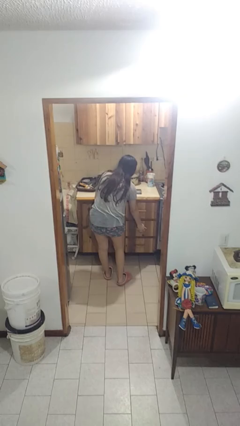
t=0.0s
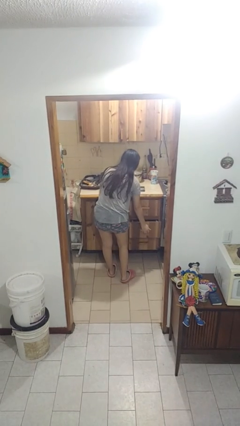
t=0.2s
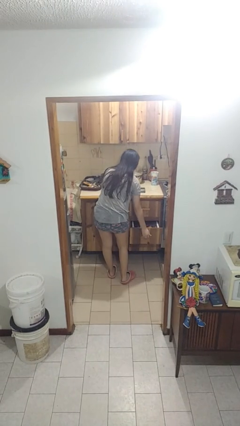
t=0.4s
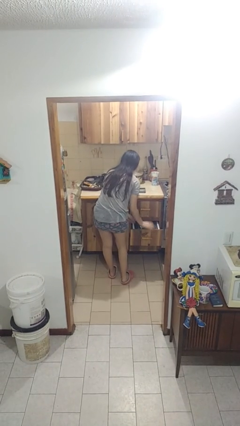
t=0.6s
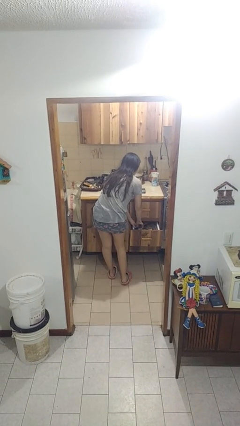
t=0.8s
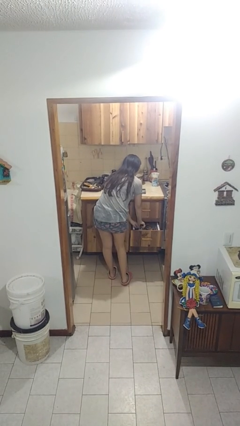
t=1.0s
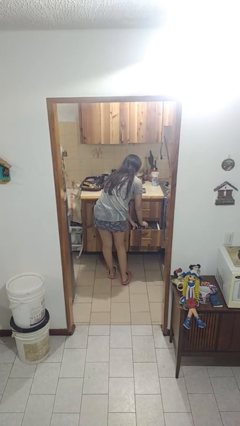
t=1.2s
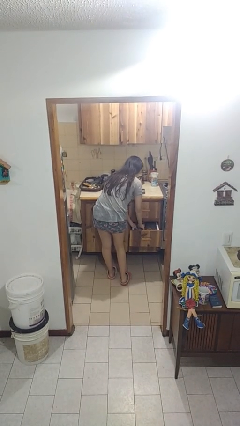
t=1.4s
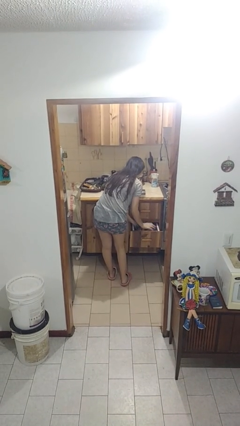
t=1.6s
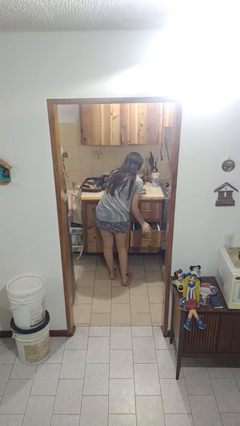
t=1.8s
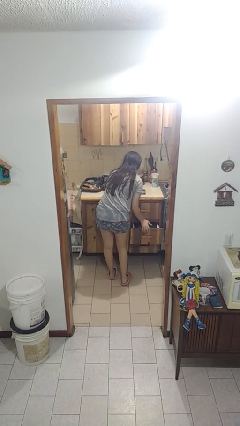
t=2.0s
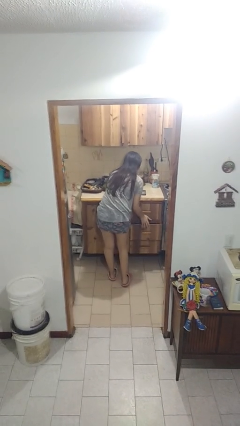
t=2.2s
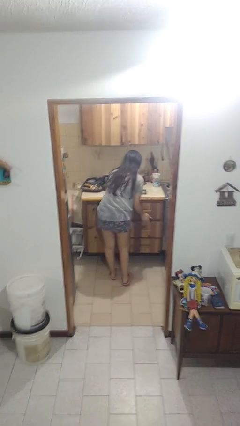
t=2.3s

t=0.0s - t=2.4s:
person searches in kitchen drawer

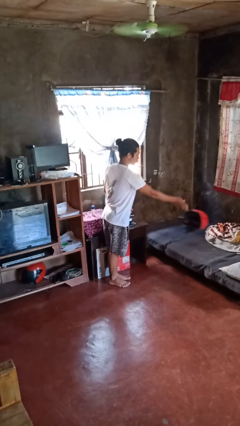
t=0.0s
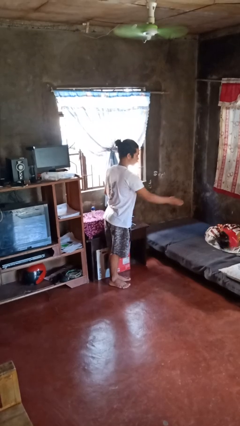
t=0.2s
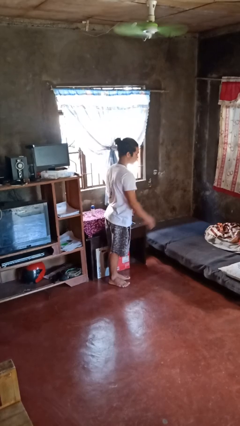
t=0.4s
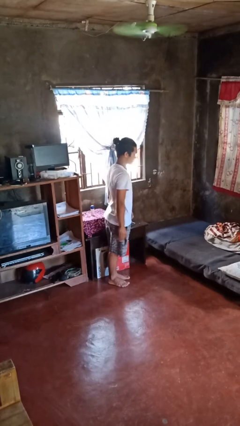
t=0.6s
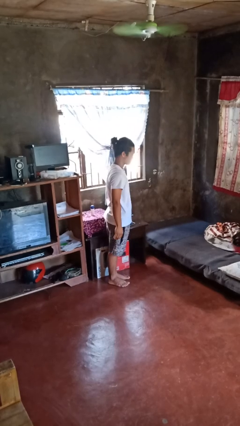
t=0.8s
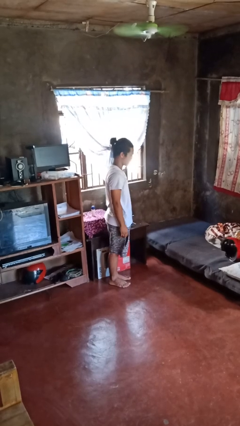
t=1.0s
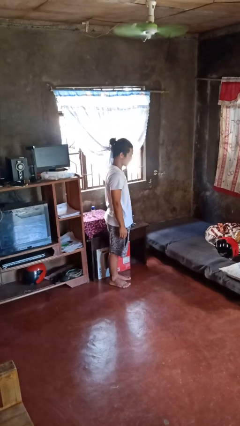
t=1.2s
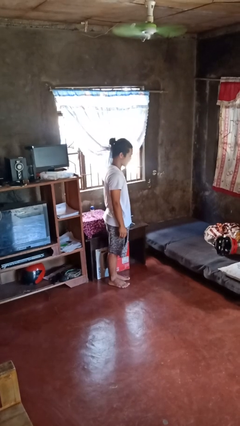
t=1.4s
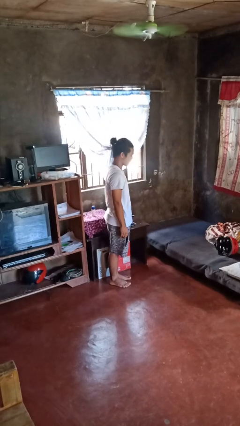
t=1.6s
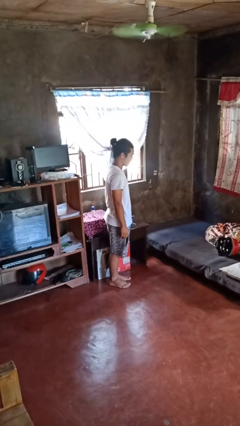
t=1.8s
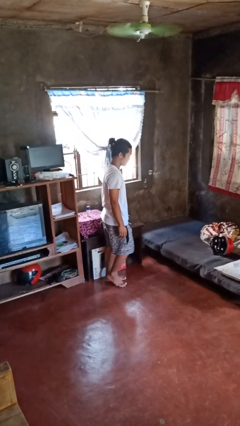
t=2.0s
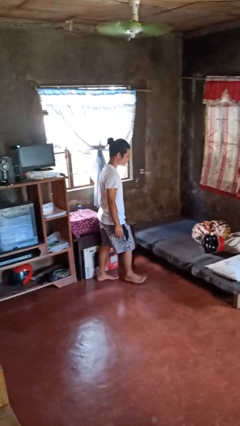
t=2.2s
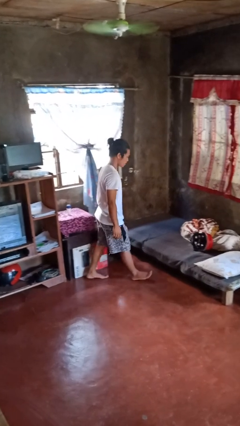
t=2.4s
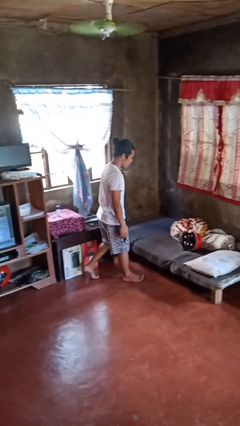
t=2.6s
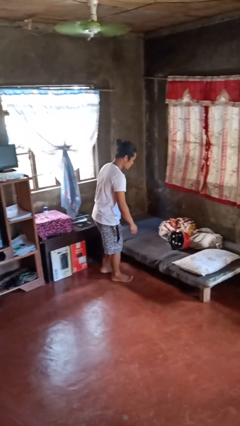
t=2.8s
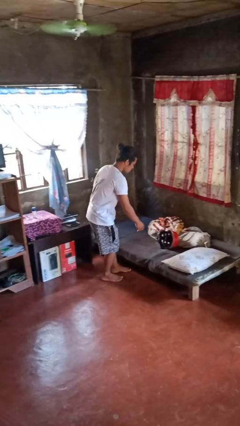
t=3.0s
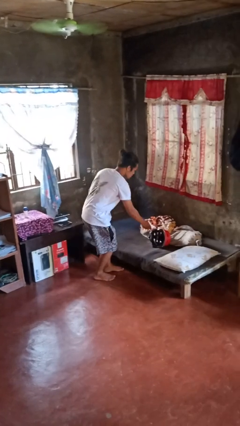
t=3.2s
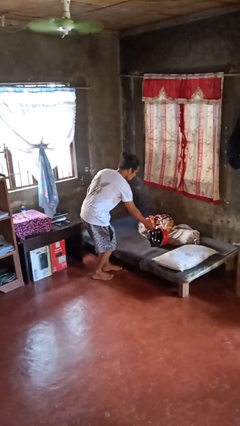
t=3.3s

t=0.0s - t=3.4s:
person throws object on bed

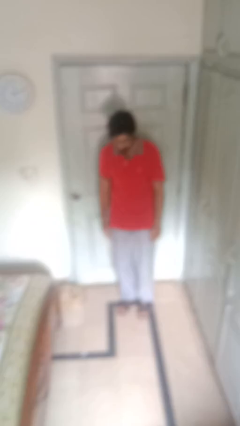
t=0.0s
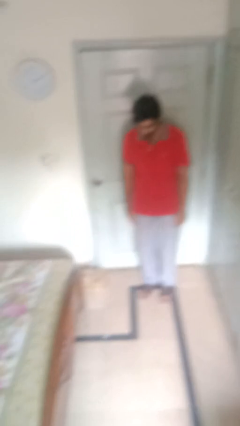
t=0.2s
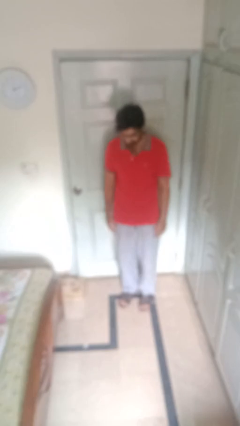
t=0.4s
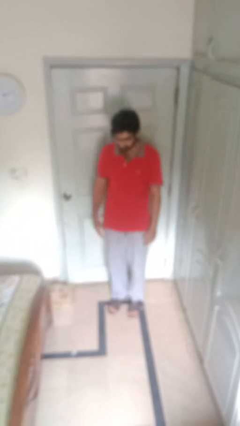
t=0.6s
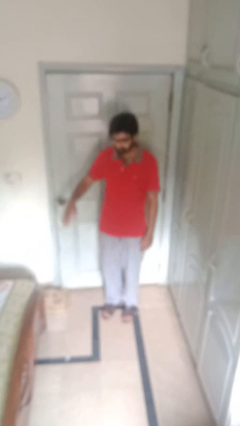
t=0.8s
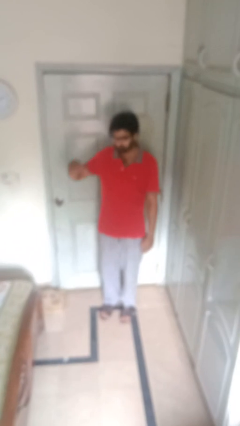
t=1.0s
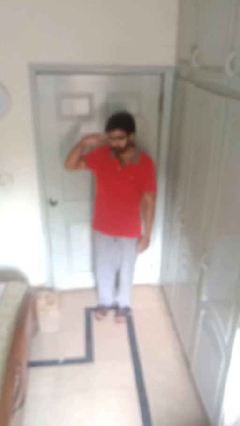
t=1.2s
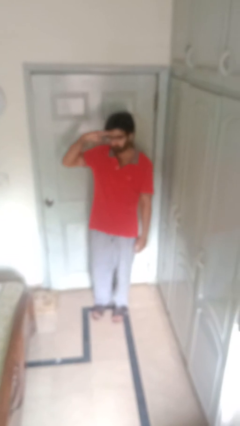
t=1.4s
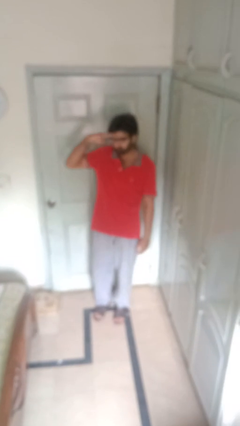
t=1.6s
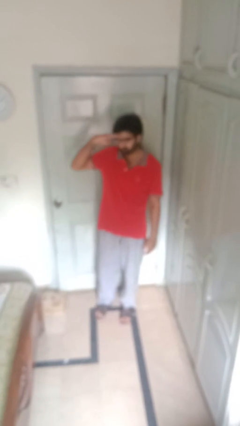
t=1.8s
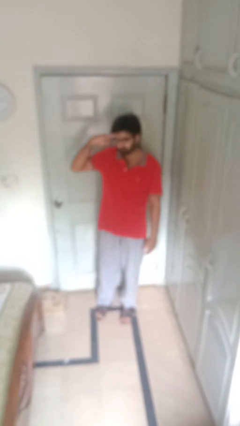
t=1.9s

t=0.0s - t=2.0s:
person salutes

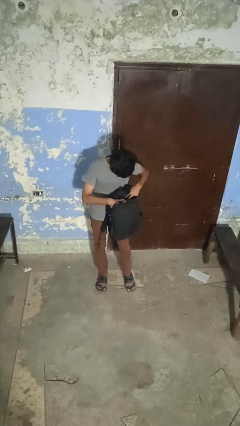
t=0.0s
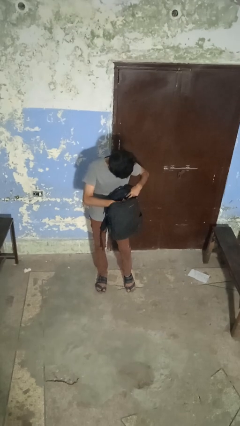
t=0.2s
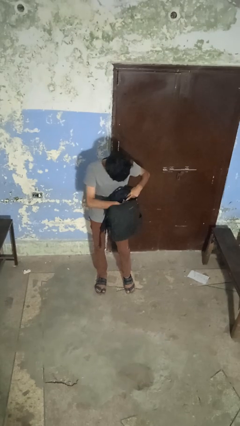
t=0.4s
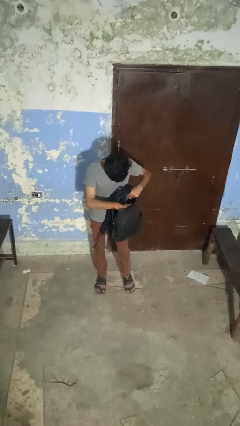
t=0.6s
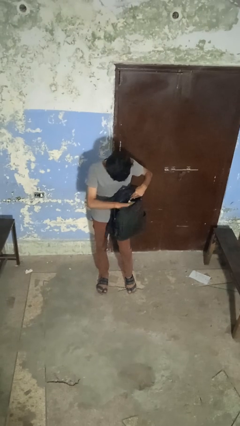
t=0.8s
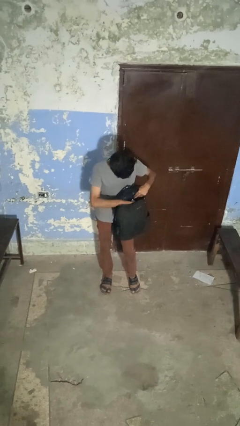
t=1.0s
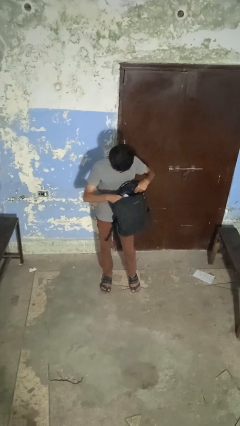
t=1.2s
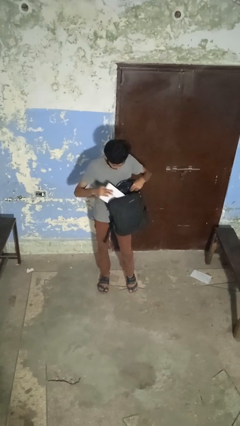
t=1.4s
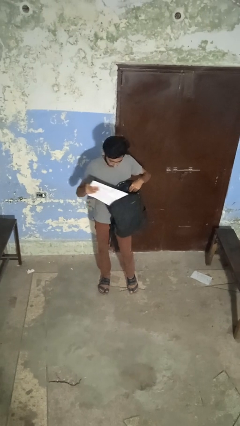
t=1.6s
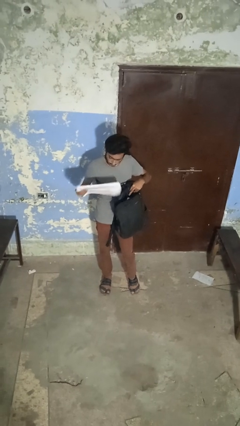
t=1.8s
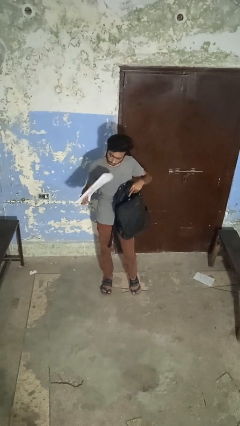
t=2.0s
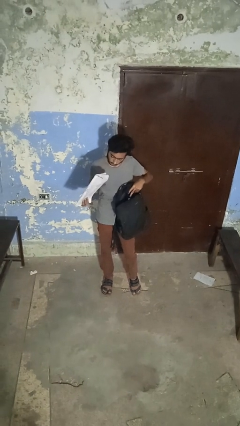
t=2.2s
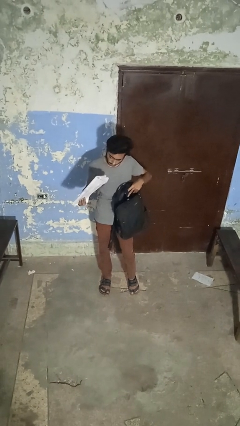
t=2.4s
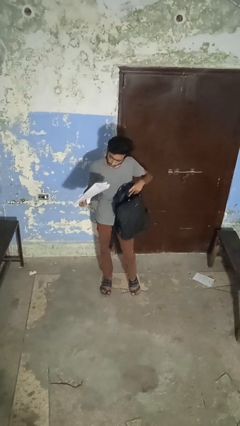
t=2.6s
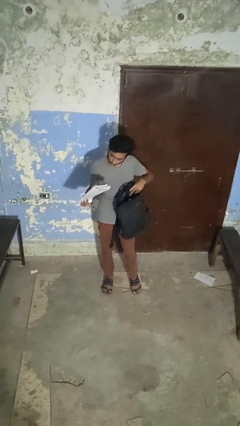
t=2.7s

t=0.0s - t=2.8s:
person takes object from backpack

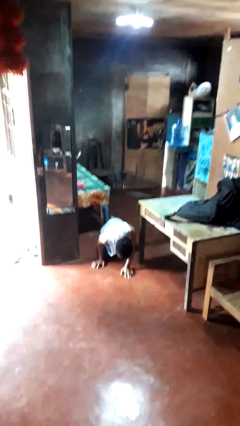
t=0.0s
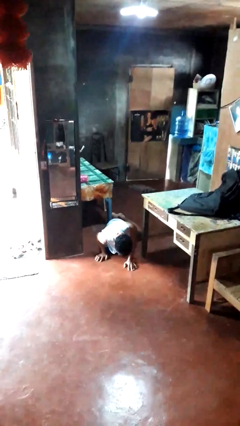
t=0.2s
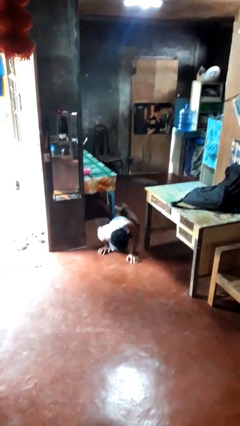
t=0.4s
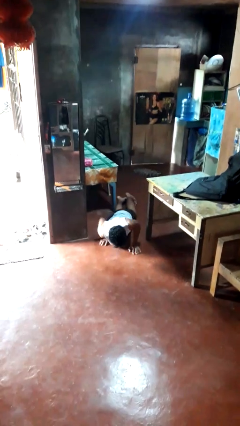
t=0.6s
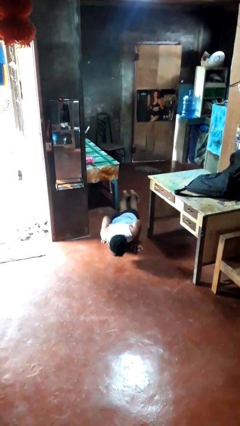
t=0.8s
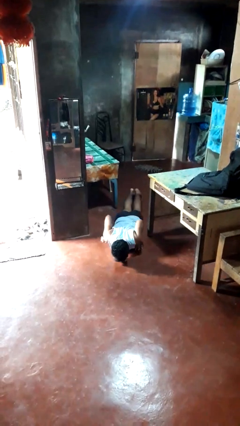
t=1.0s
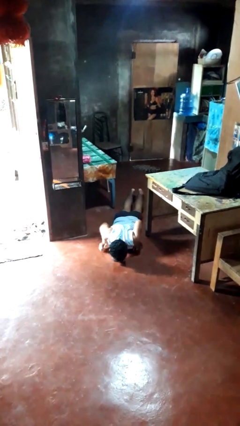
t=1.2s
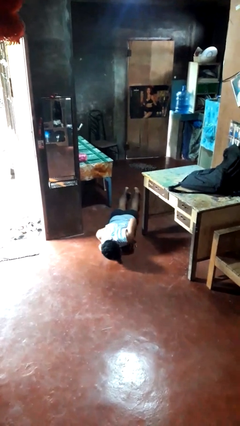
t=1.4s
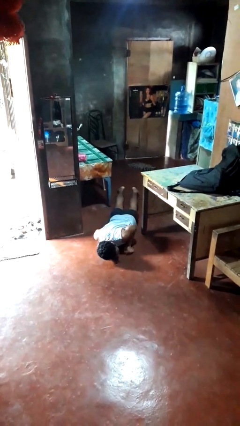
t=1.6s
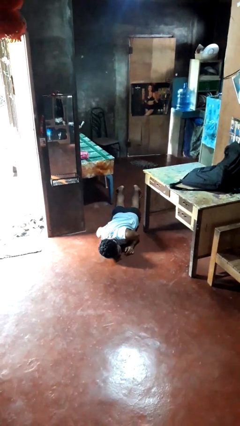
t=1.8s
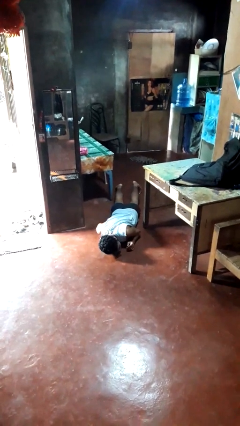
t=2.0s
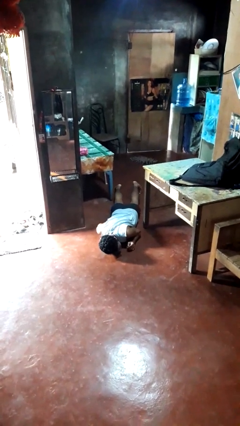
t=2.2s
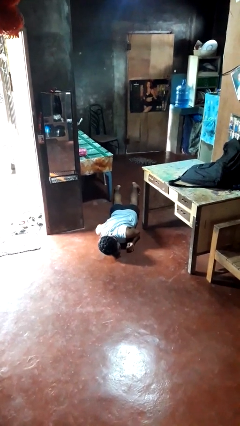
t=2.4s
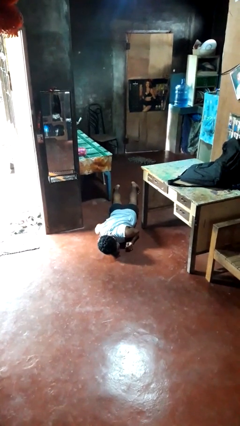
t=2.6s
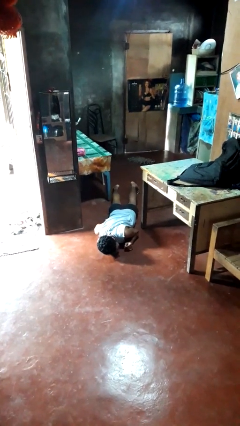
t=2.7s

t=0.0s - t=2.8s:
person lies down on floor

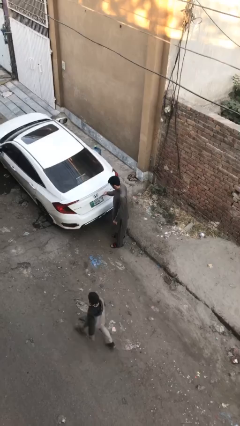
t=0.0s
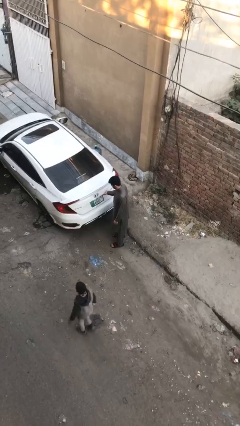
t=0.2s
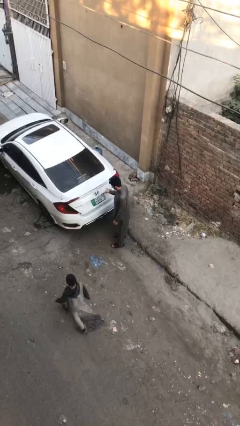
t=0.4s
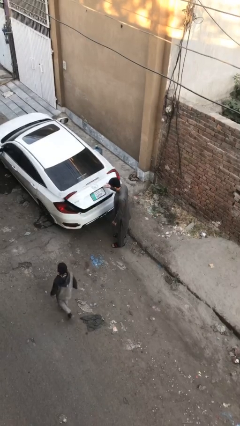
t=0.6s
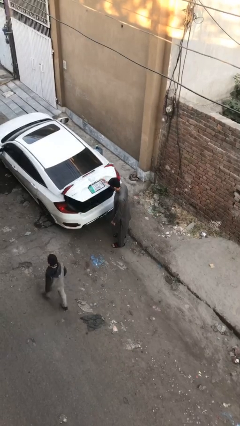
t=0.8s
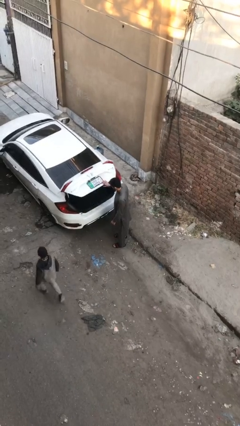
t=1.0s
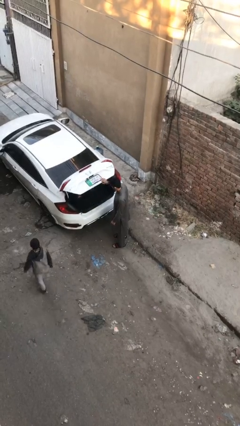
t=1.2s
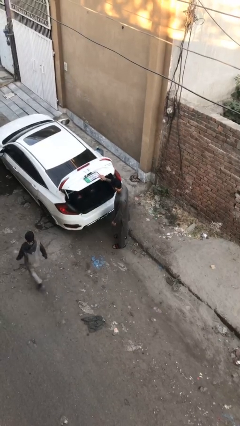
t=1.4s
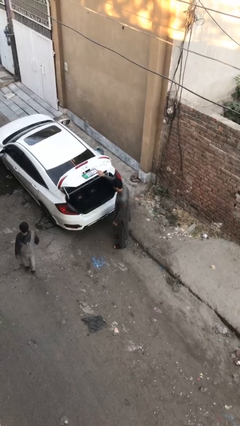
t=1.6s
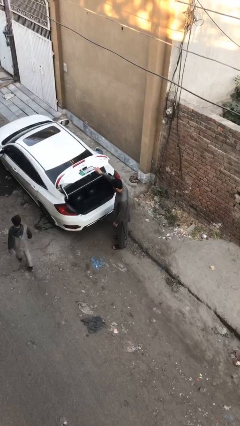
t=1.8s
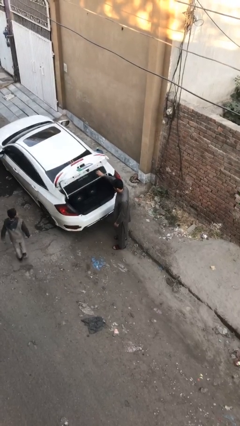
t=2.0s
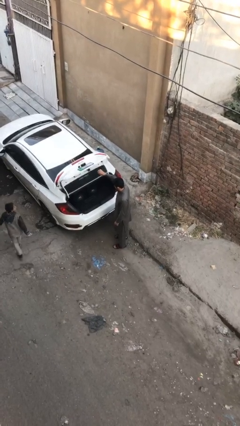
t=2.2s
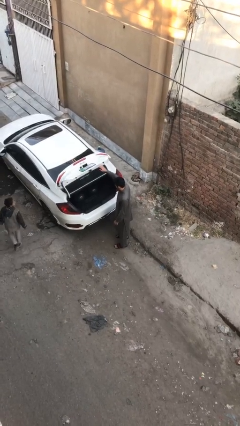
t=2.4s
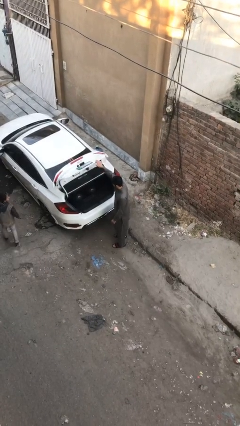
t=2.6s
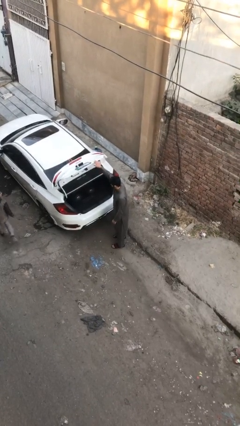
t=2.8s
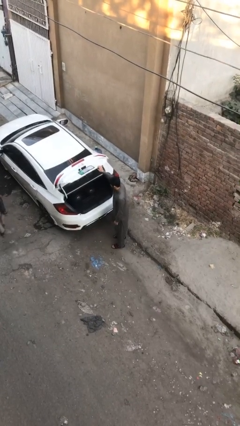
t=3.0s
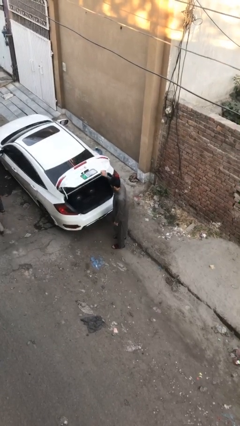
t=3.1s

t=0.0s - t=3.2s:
person opens car trunk

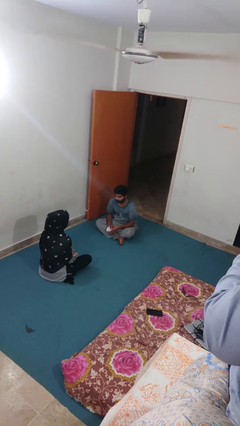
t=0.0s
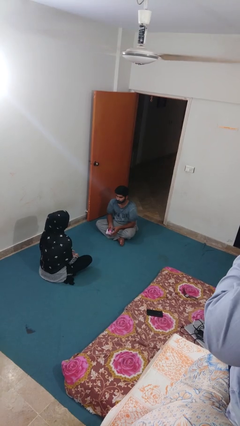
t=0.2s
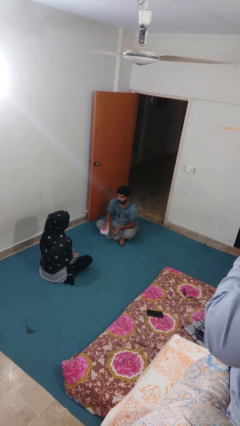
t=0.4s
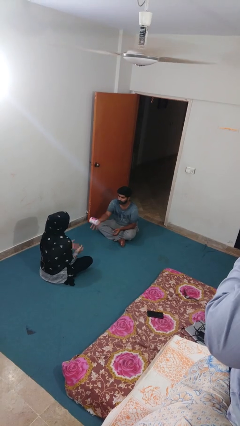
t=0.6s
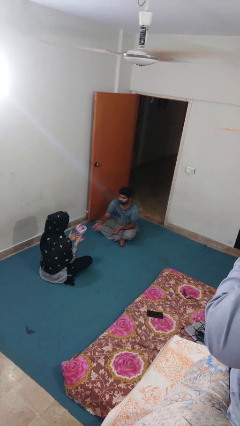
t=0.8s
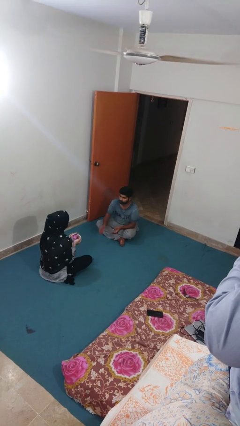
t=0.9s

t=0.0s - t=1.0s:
person throws object to person
